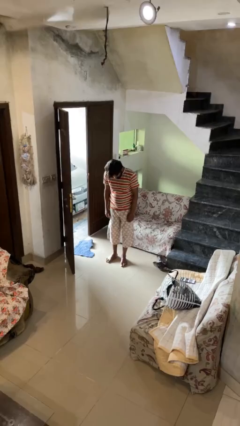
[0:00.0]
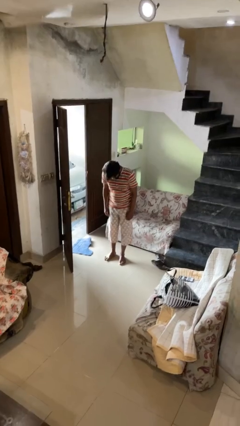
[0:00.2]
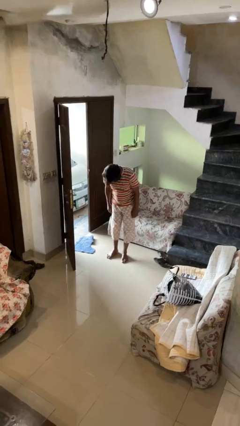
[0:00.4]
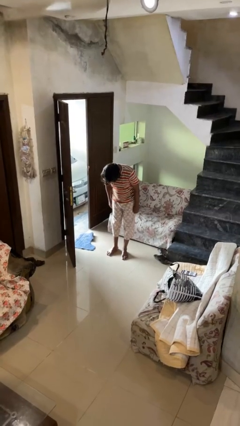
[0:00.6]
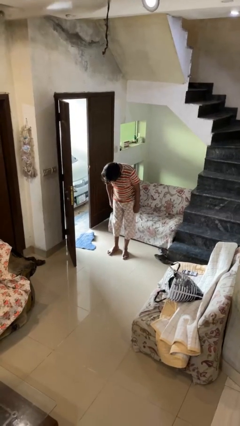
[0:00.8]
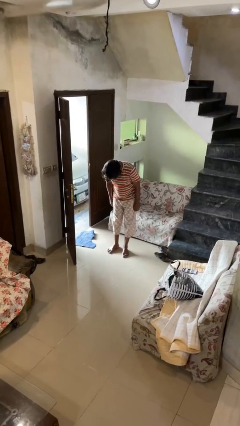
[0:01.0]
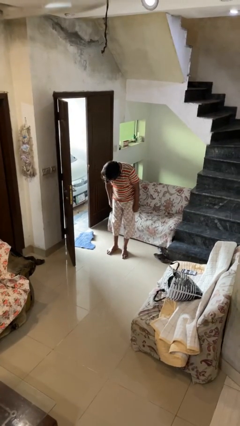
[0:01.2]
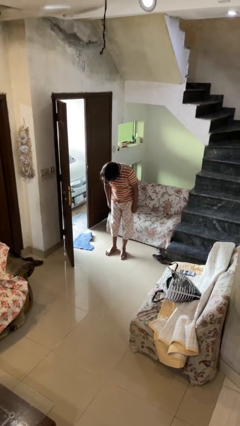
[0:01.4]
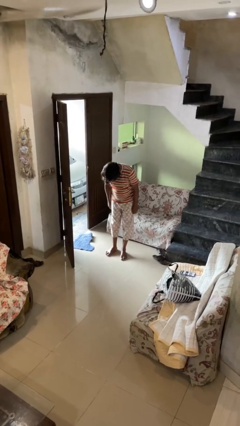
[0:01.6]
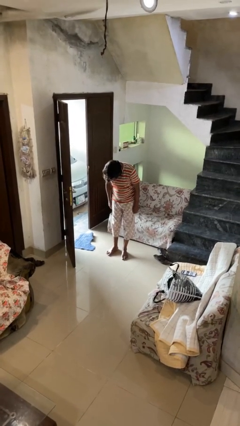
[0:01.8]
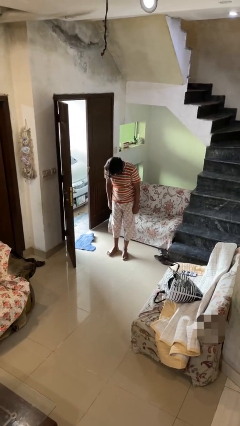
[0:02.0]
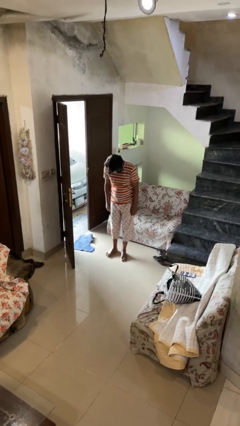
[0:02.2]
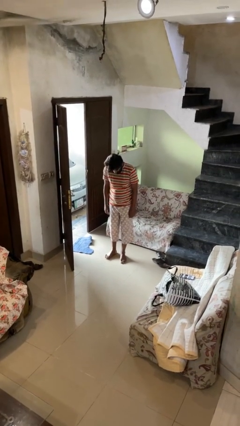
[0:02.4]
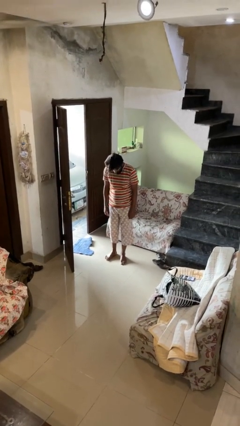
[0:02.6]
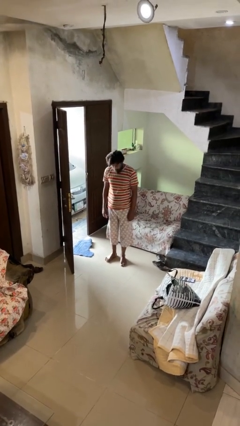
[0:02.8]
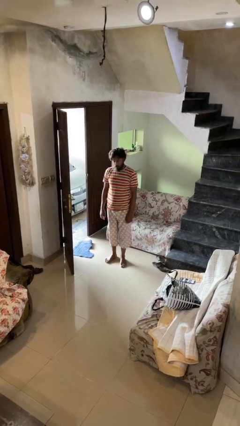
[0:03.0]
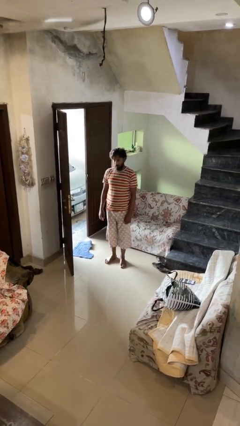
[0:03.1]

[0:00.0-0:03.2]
person bows

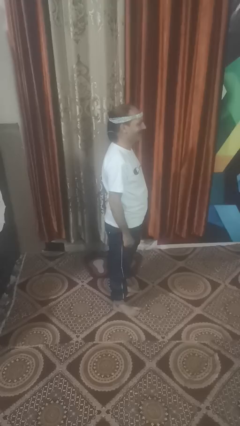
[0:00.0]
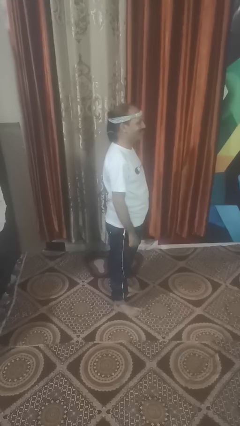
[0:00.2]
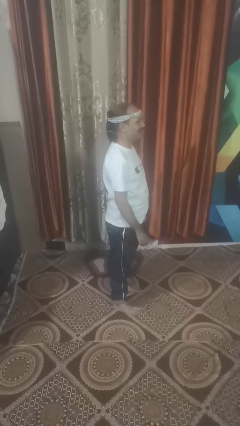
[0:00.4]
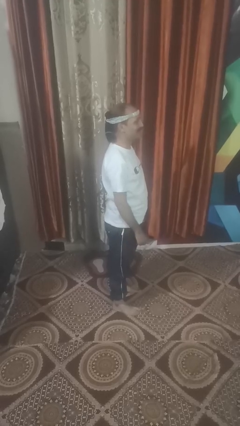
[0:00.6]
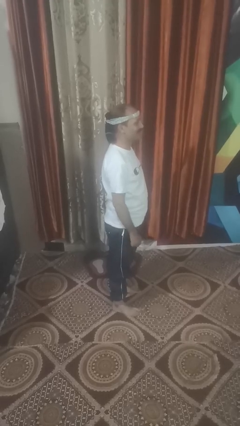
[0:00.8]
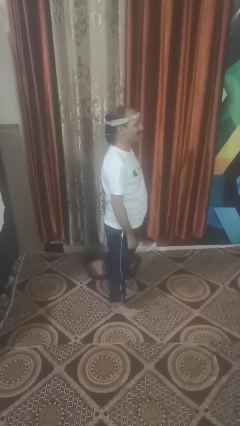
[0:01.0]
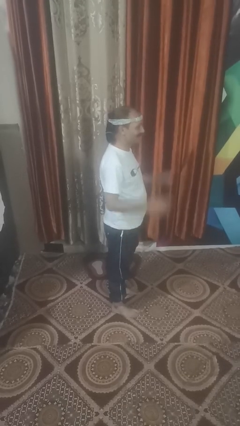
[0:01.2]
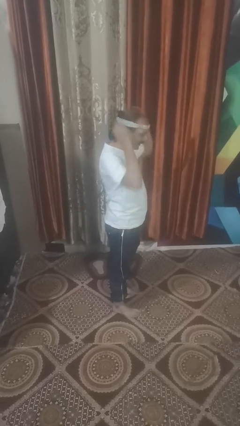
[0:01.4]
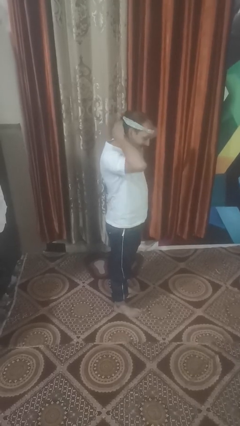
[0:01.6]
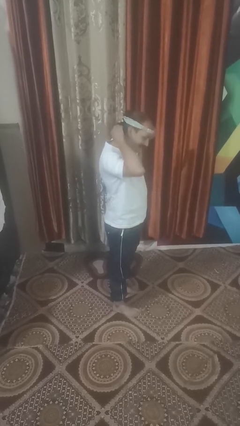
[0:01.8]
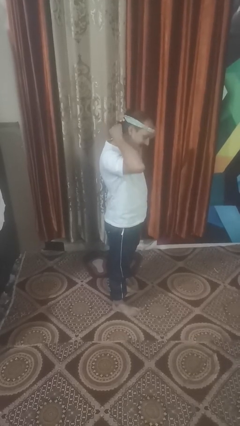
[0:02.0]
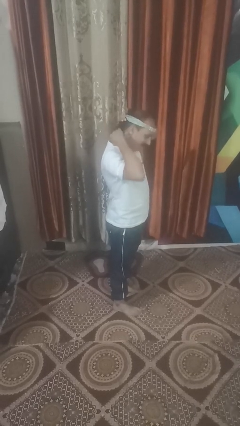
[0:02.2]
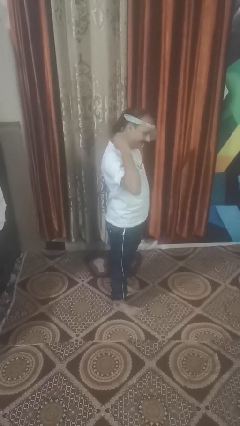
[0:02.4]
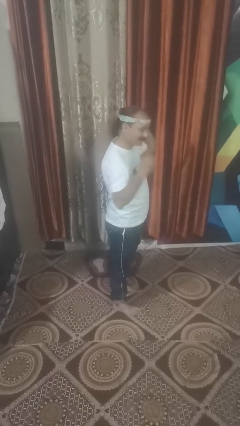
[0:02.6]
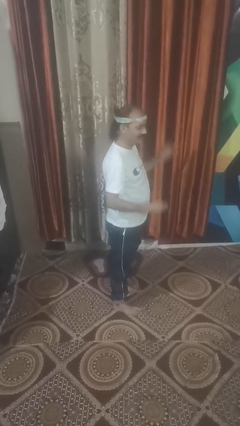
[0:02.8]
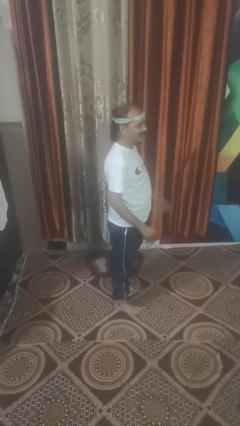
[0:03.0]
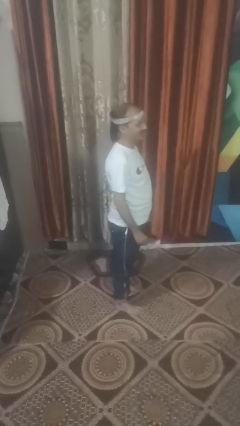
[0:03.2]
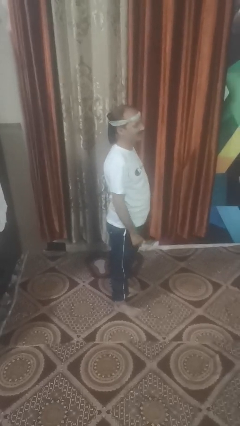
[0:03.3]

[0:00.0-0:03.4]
person takes off hairtie

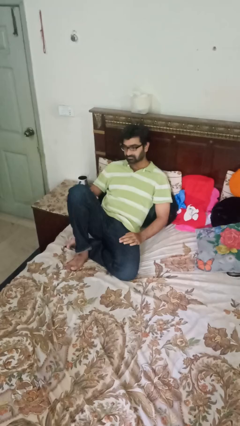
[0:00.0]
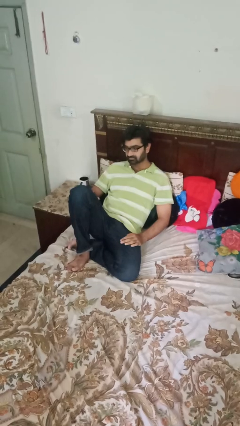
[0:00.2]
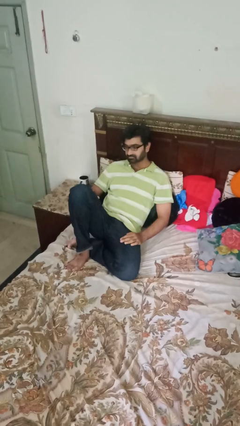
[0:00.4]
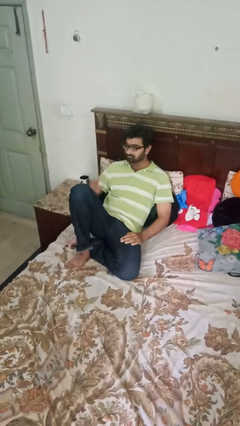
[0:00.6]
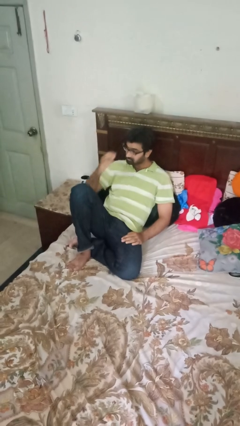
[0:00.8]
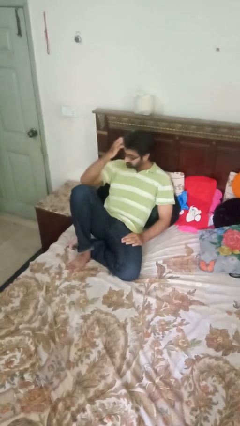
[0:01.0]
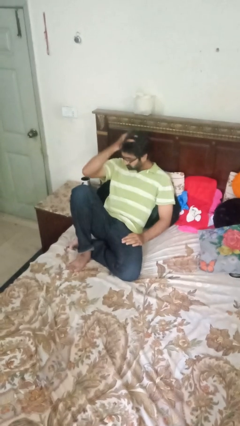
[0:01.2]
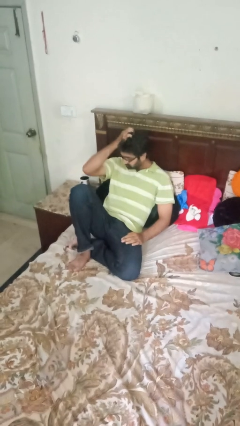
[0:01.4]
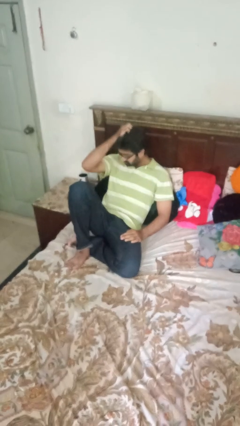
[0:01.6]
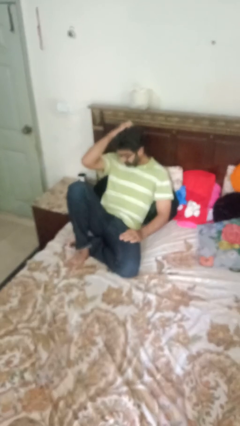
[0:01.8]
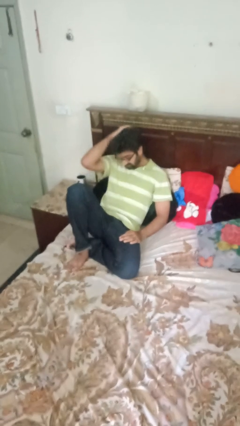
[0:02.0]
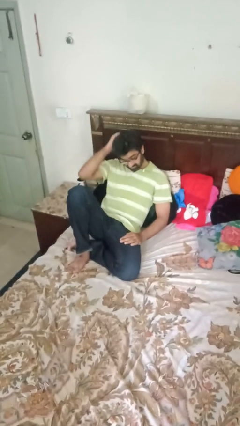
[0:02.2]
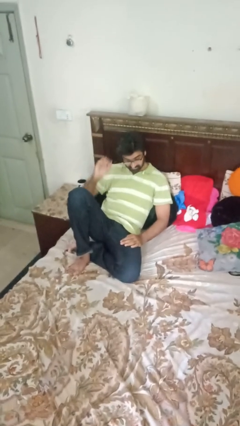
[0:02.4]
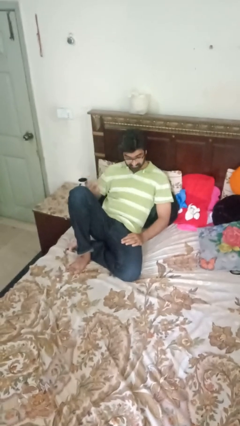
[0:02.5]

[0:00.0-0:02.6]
person strokes hair

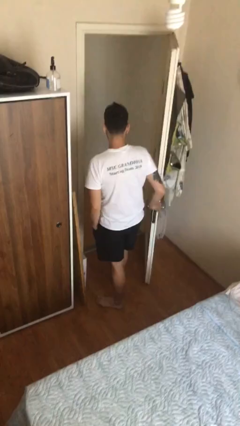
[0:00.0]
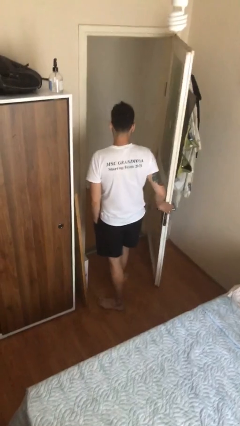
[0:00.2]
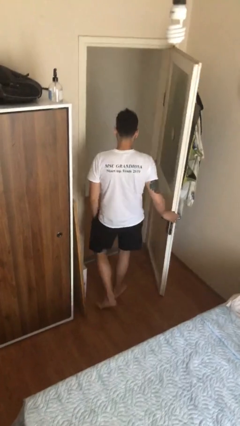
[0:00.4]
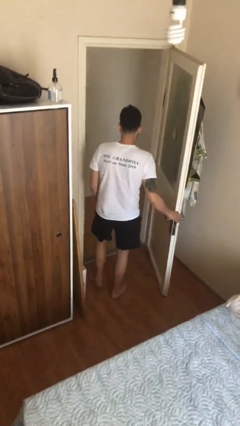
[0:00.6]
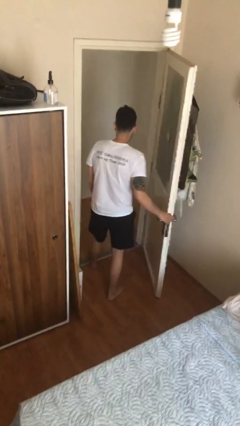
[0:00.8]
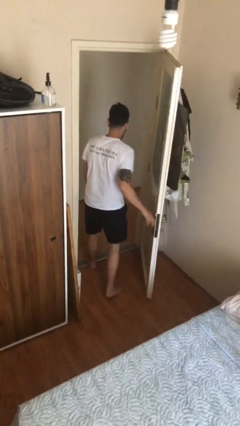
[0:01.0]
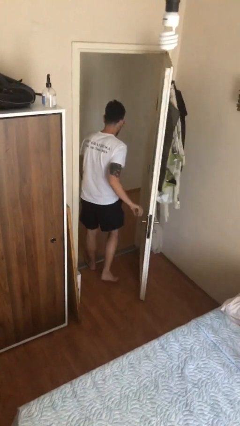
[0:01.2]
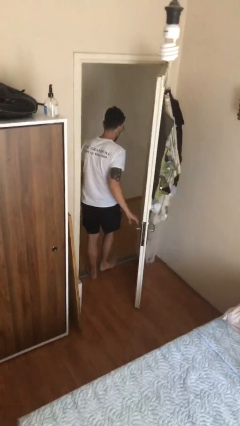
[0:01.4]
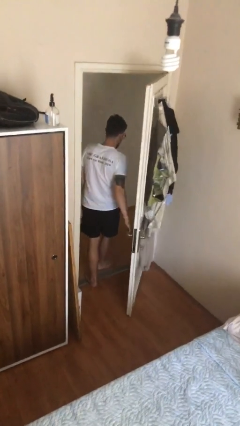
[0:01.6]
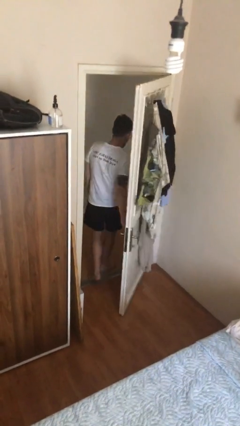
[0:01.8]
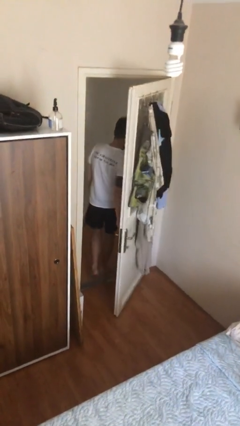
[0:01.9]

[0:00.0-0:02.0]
person exits scene through structure

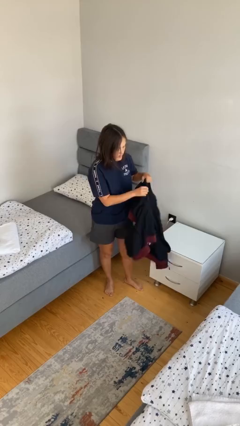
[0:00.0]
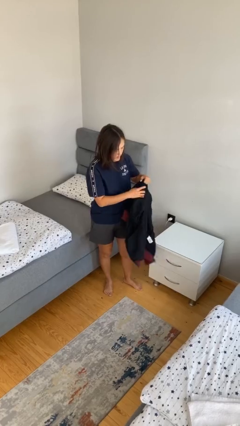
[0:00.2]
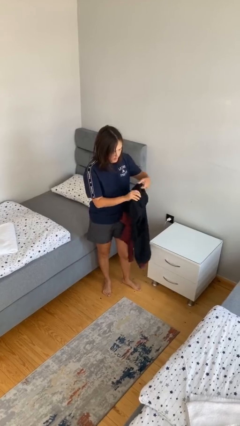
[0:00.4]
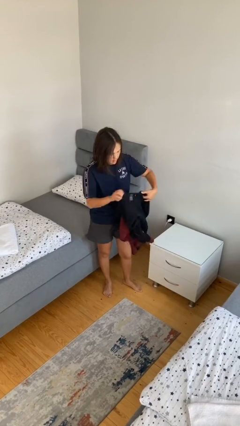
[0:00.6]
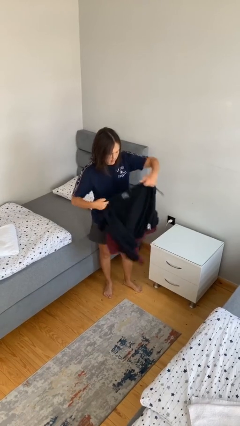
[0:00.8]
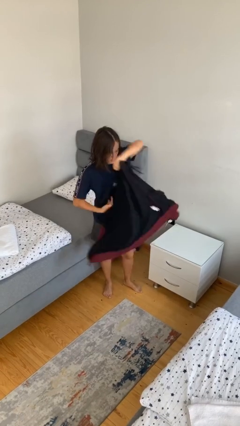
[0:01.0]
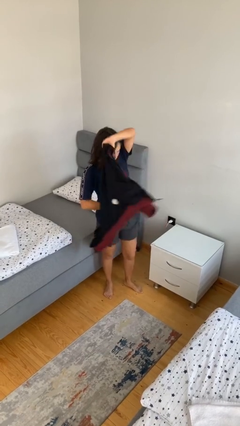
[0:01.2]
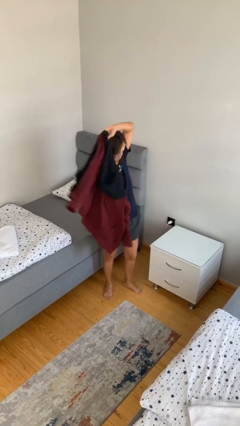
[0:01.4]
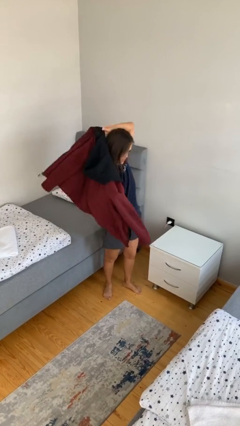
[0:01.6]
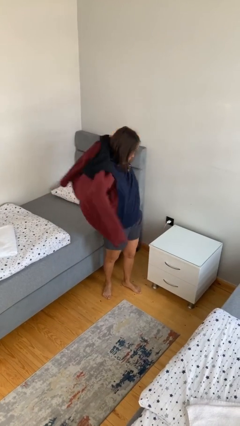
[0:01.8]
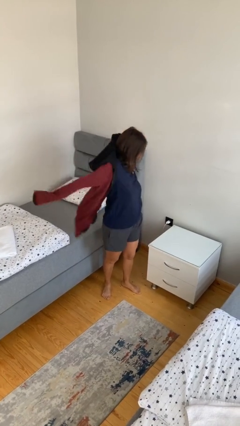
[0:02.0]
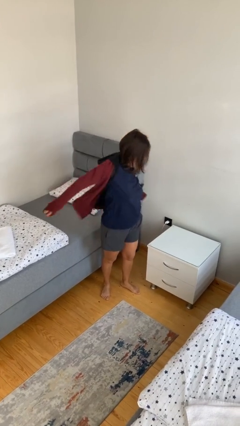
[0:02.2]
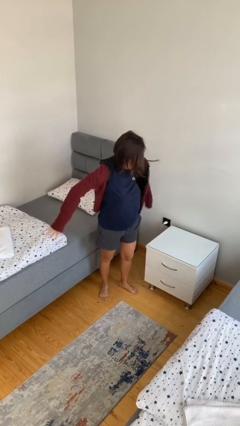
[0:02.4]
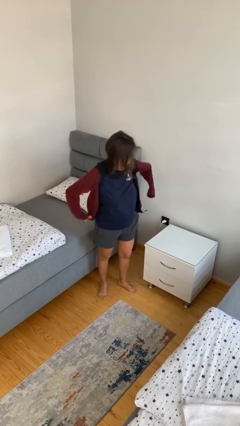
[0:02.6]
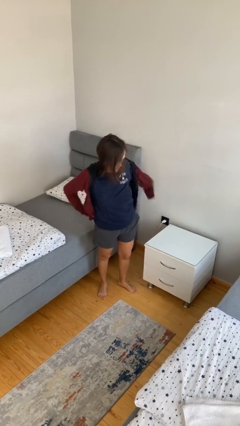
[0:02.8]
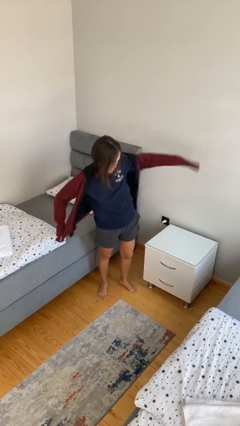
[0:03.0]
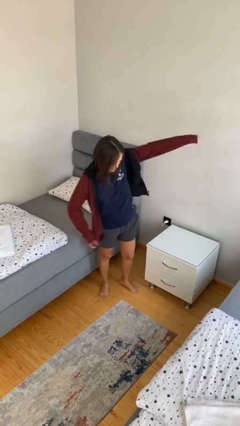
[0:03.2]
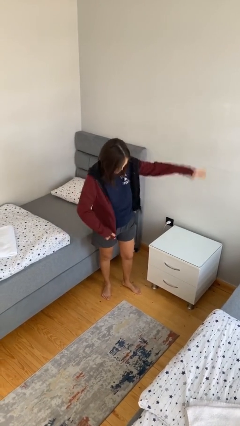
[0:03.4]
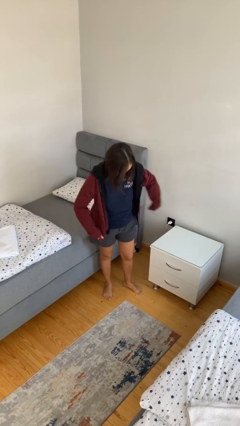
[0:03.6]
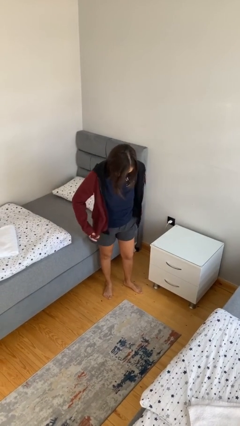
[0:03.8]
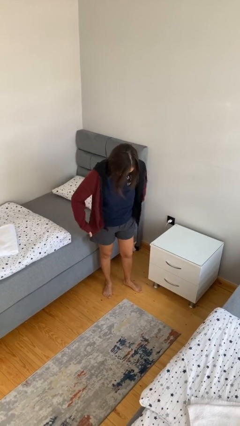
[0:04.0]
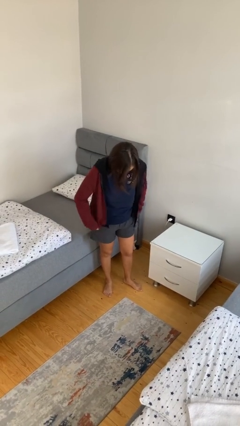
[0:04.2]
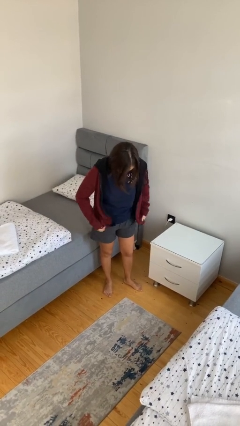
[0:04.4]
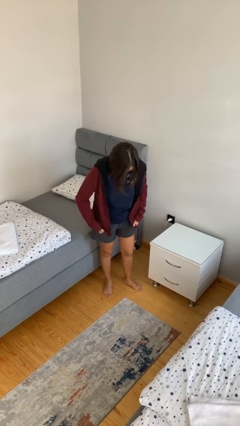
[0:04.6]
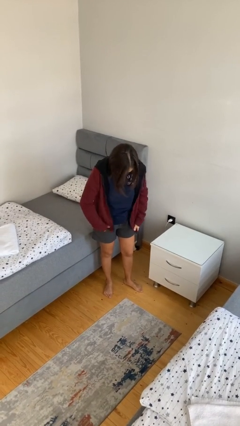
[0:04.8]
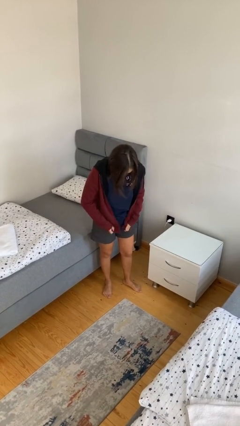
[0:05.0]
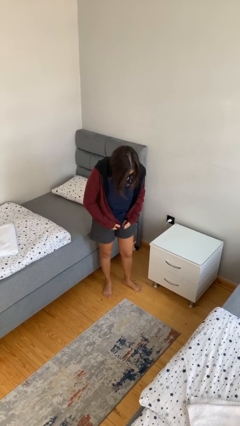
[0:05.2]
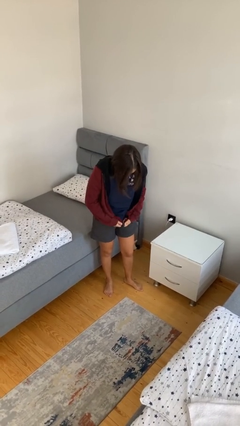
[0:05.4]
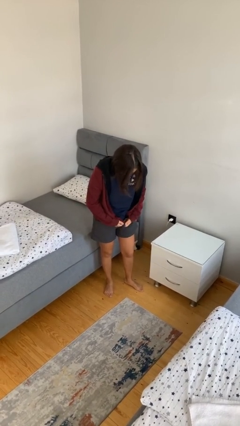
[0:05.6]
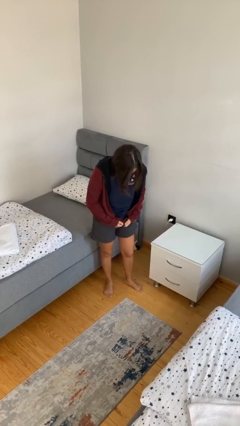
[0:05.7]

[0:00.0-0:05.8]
person puts on jacket

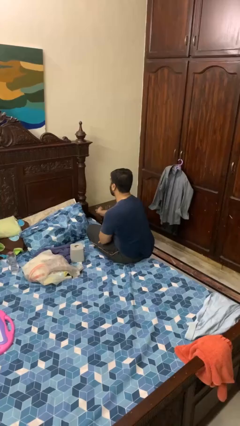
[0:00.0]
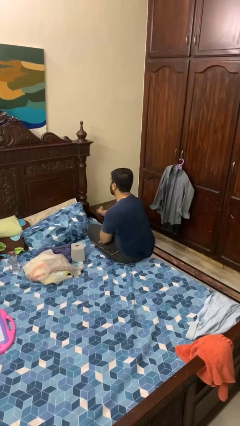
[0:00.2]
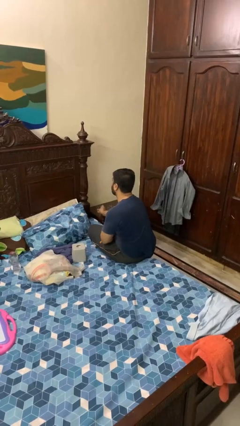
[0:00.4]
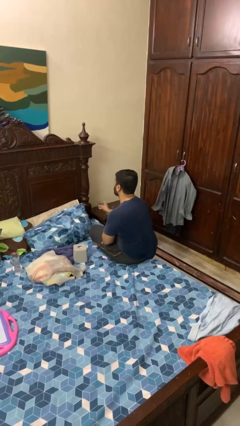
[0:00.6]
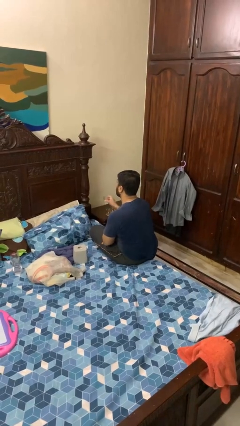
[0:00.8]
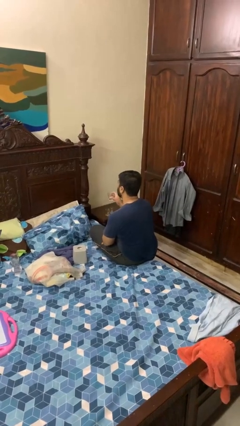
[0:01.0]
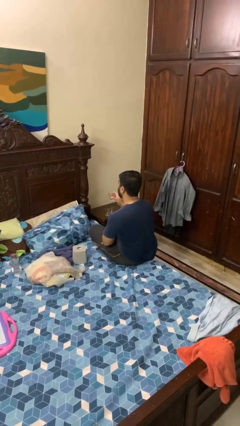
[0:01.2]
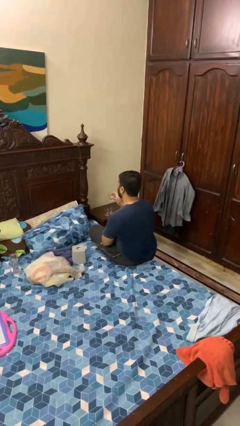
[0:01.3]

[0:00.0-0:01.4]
person picks up object from table
